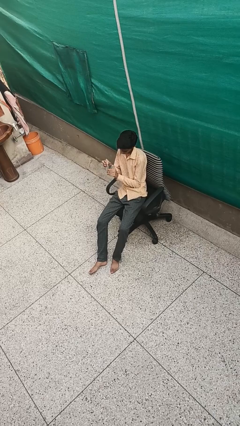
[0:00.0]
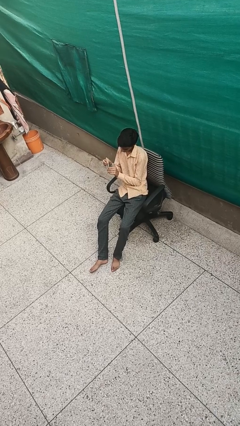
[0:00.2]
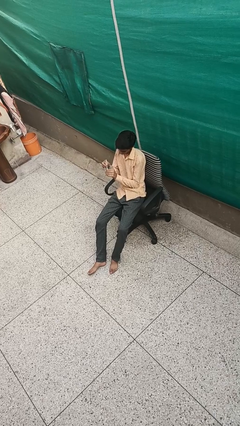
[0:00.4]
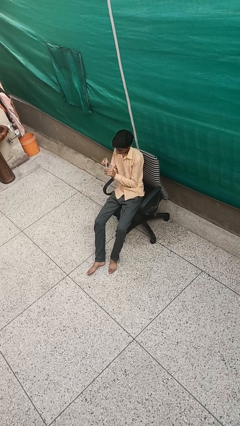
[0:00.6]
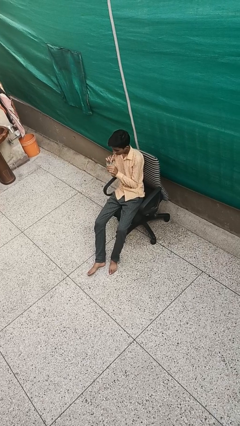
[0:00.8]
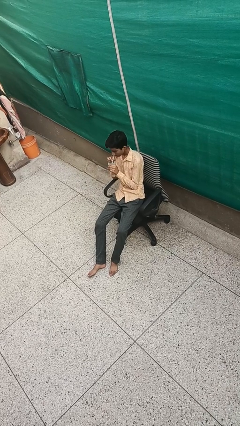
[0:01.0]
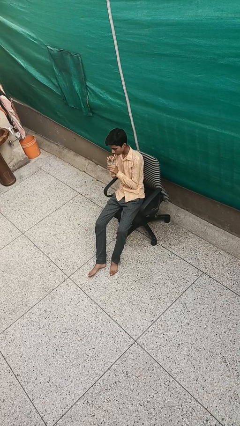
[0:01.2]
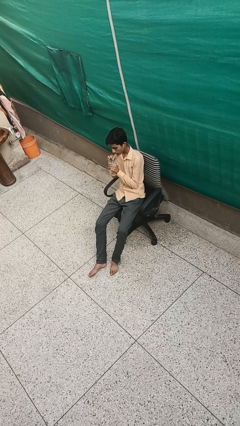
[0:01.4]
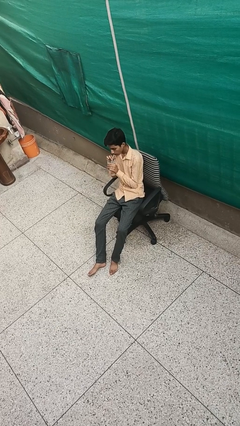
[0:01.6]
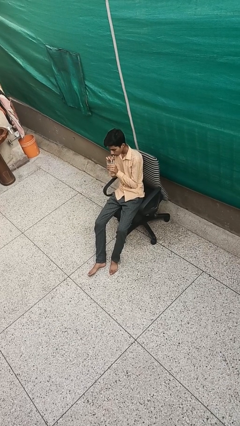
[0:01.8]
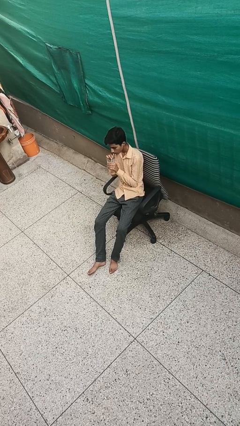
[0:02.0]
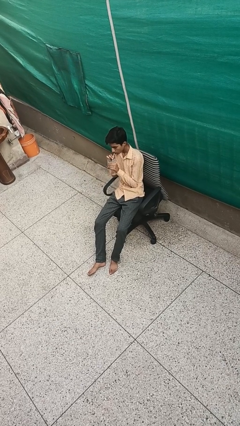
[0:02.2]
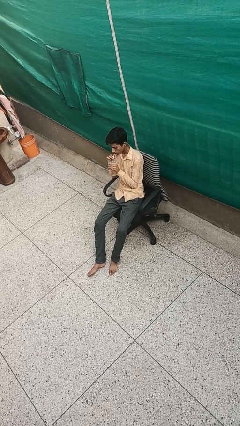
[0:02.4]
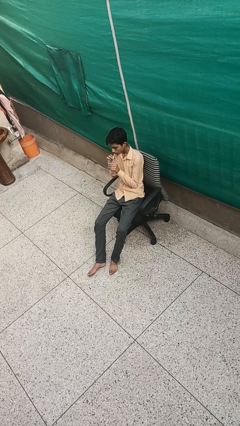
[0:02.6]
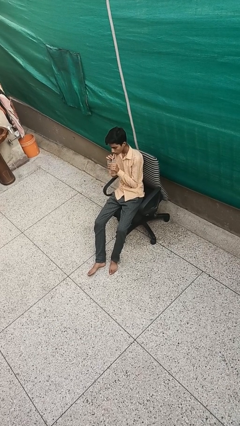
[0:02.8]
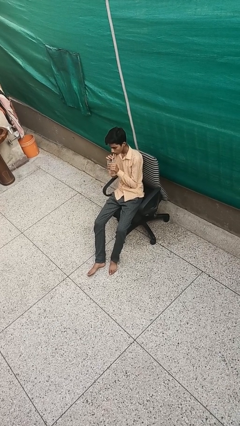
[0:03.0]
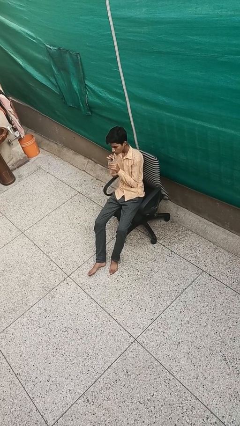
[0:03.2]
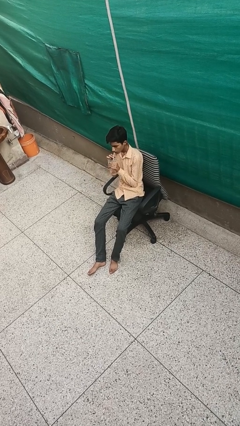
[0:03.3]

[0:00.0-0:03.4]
person drinks from straw

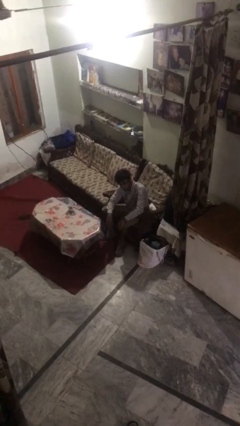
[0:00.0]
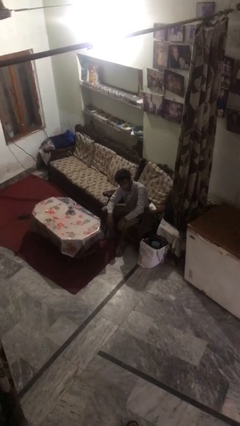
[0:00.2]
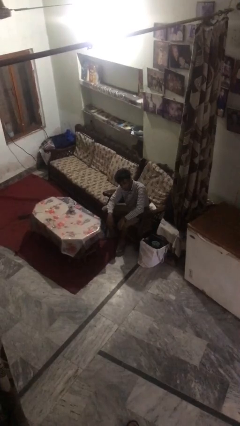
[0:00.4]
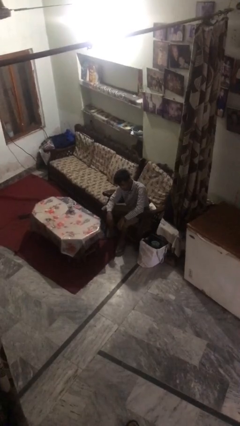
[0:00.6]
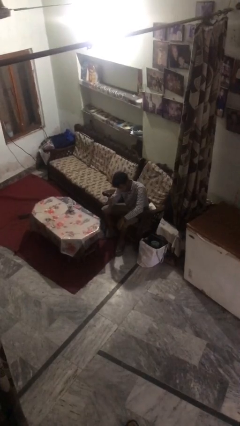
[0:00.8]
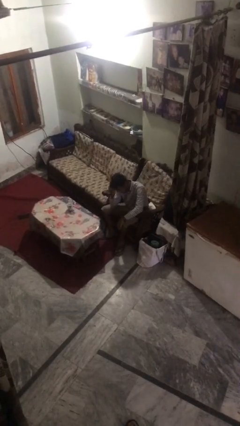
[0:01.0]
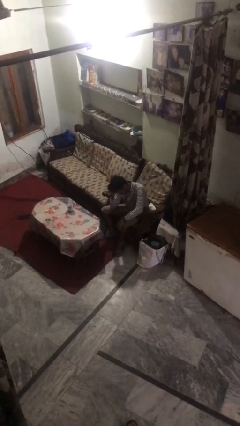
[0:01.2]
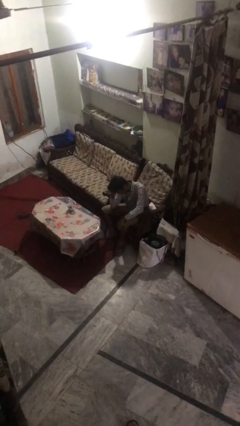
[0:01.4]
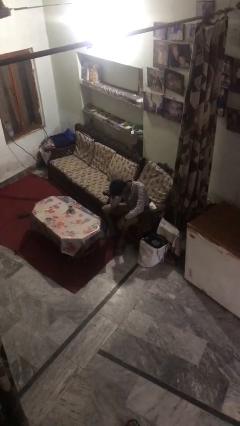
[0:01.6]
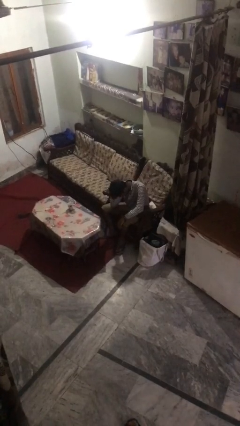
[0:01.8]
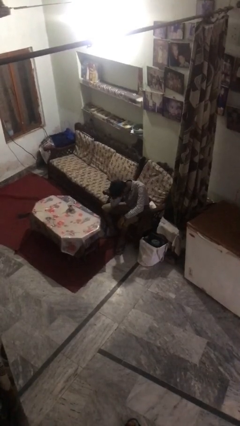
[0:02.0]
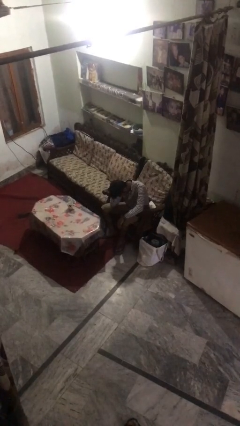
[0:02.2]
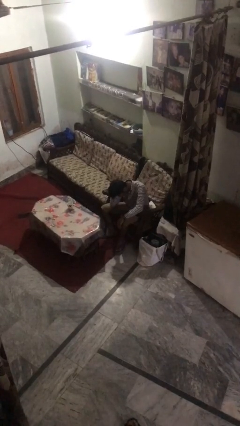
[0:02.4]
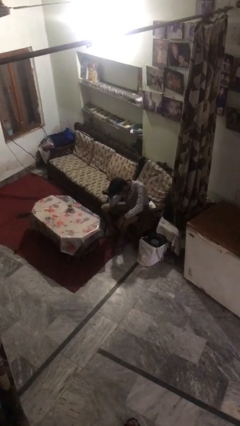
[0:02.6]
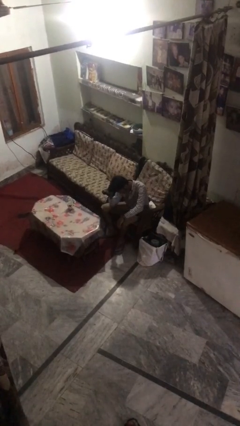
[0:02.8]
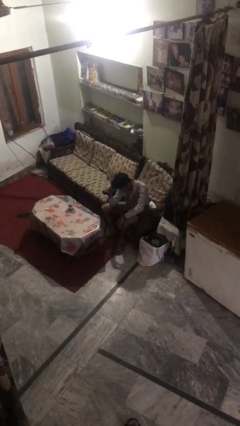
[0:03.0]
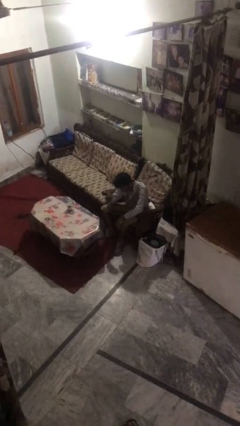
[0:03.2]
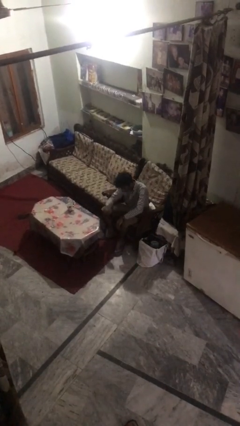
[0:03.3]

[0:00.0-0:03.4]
person strokes hair

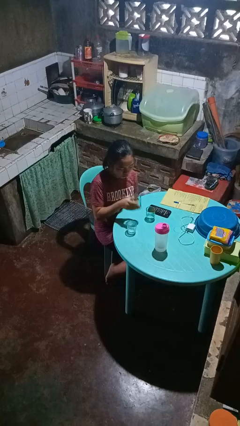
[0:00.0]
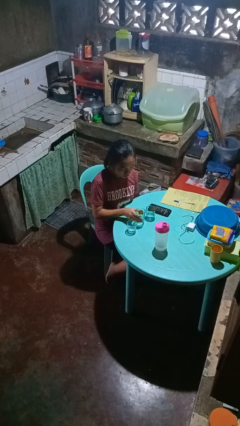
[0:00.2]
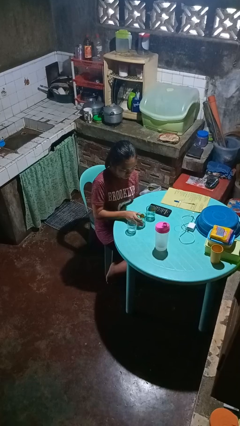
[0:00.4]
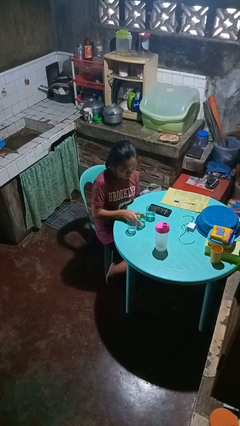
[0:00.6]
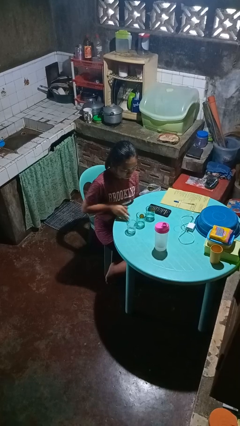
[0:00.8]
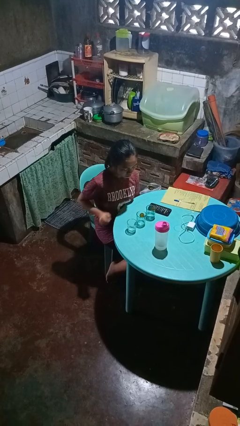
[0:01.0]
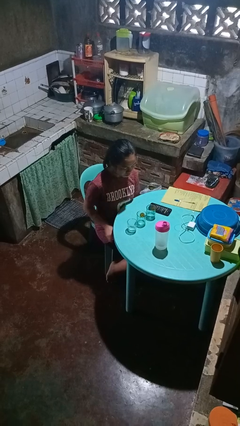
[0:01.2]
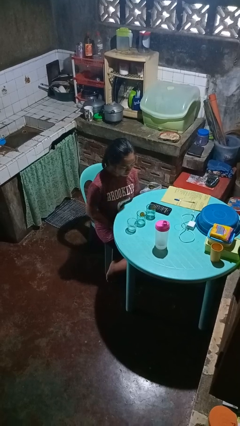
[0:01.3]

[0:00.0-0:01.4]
person puts down object on table

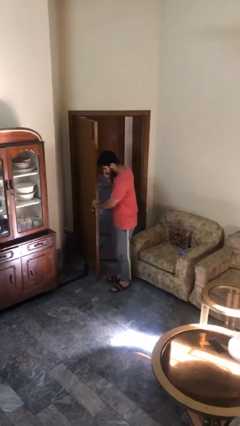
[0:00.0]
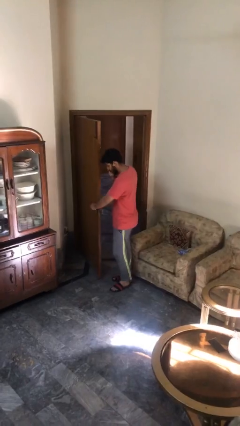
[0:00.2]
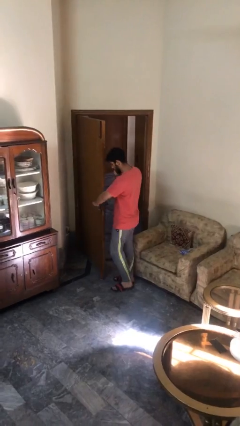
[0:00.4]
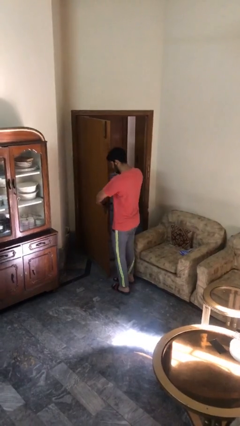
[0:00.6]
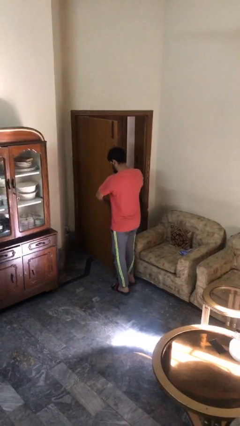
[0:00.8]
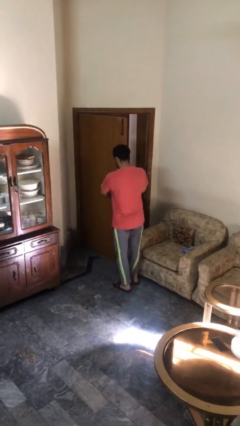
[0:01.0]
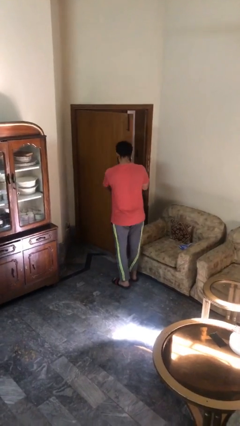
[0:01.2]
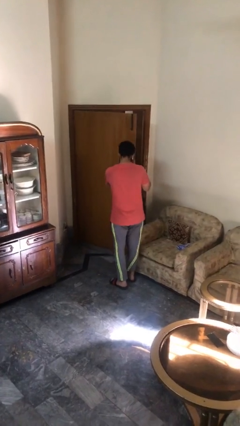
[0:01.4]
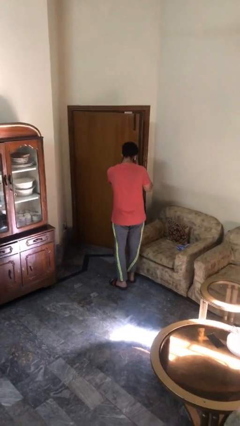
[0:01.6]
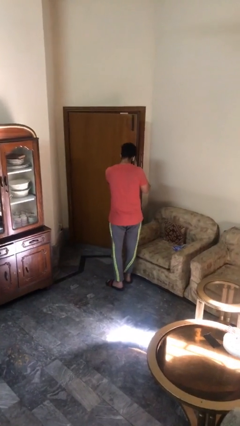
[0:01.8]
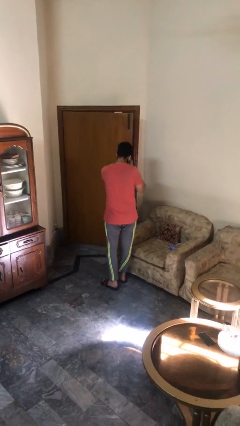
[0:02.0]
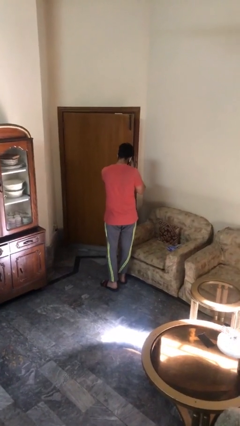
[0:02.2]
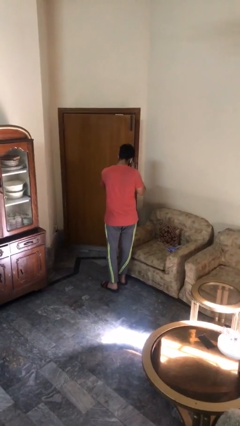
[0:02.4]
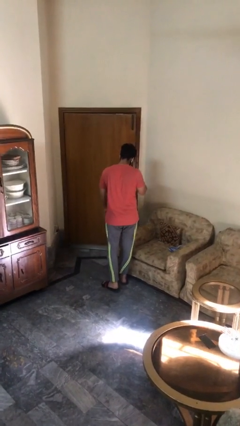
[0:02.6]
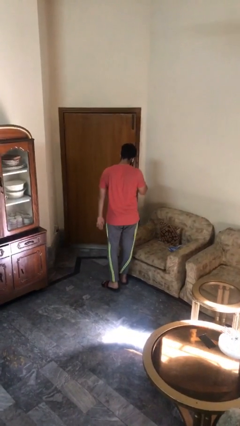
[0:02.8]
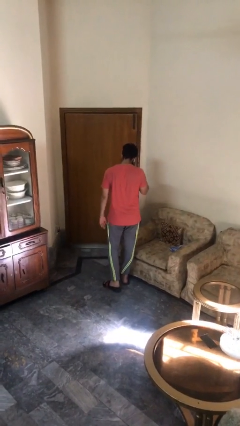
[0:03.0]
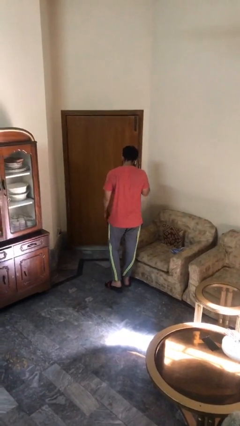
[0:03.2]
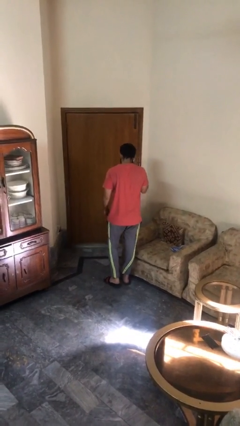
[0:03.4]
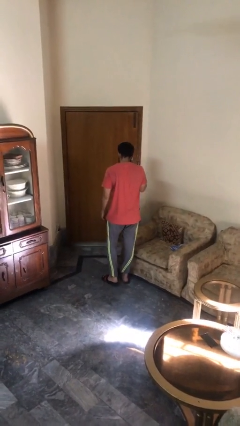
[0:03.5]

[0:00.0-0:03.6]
person closes facility door

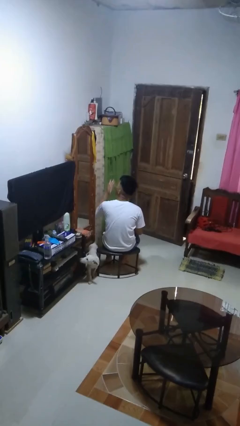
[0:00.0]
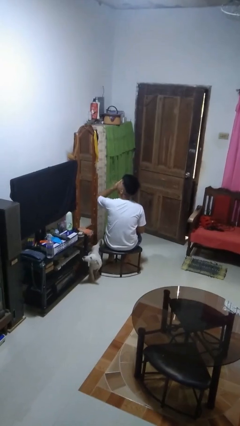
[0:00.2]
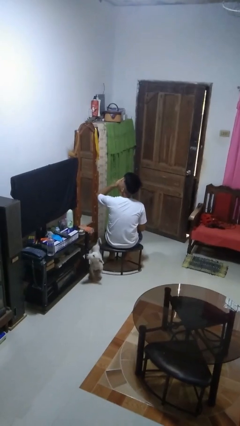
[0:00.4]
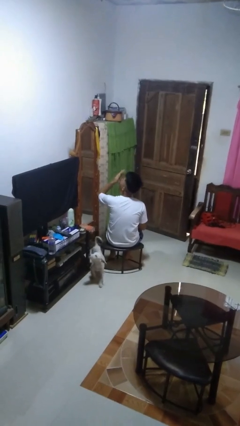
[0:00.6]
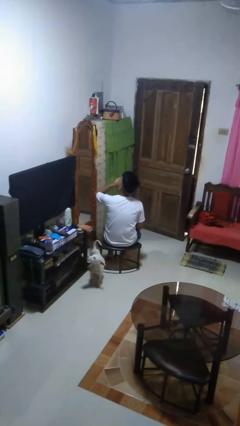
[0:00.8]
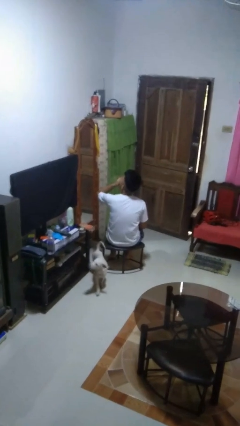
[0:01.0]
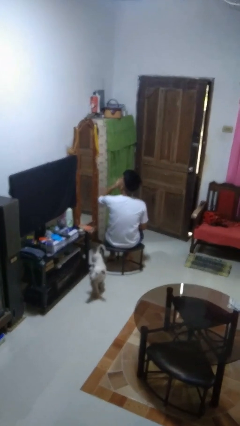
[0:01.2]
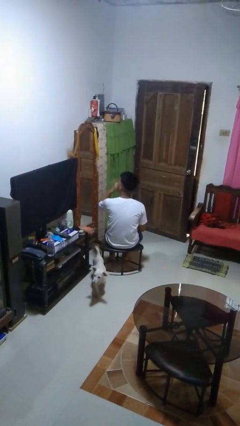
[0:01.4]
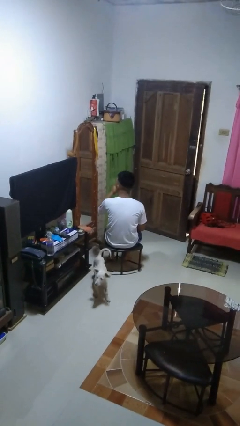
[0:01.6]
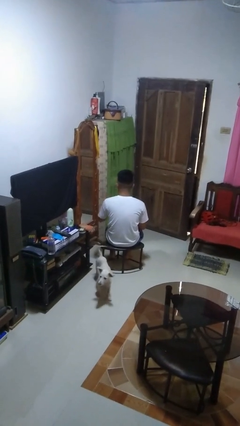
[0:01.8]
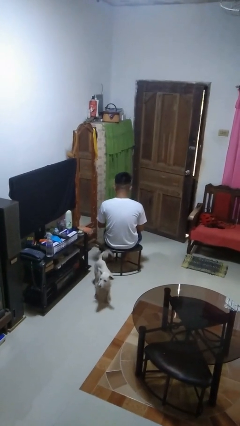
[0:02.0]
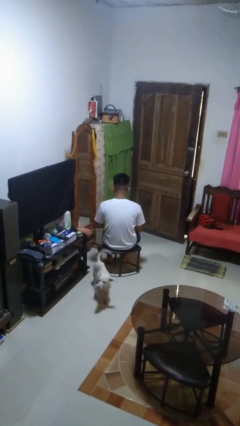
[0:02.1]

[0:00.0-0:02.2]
person yawns

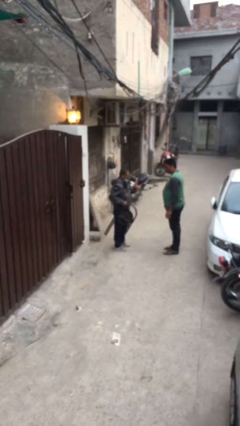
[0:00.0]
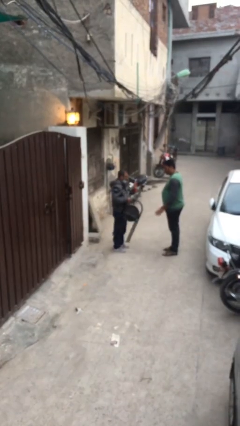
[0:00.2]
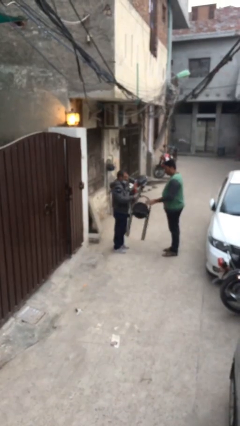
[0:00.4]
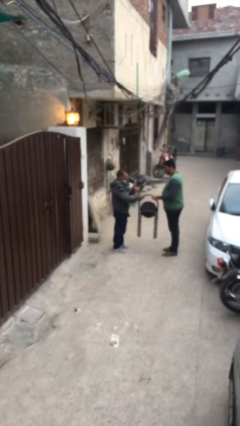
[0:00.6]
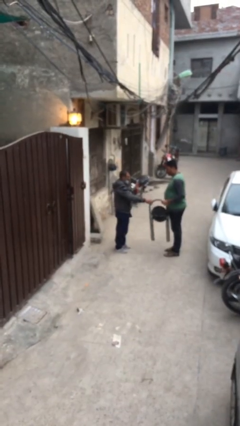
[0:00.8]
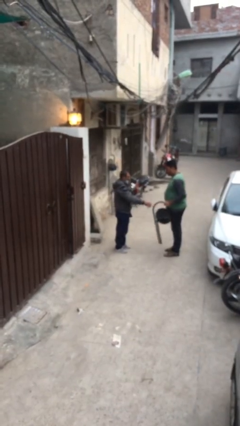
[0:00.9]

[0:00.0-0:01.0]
person transfers object to person

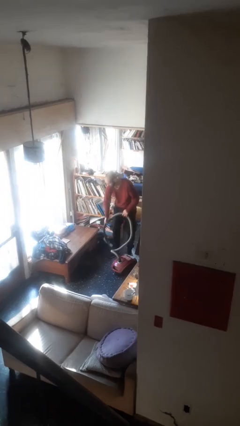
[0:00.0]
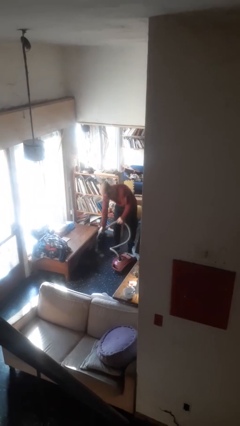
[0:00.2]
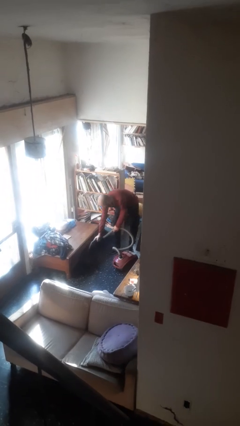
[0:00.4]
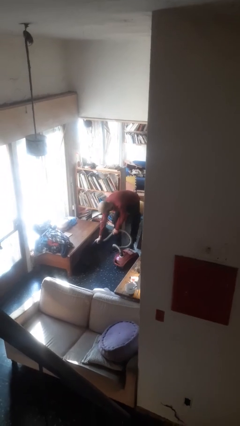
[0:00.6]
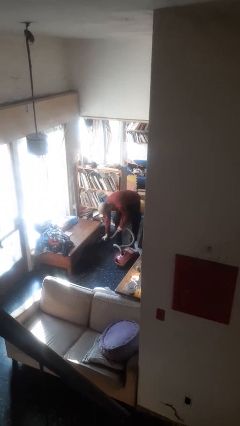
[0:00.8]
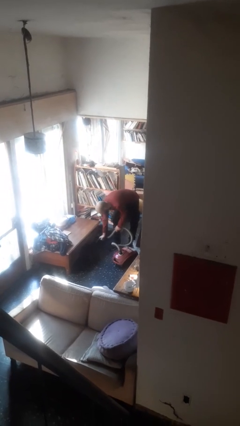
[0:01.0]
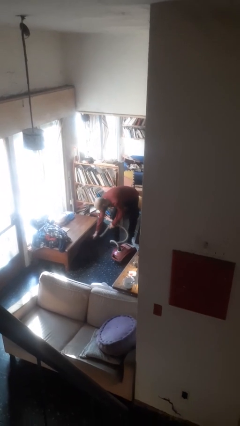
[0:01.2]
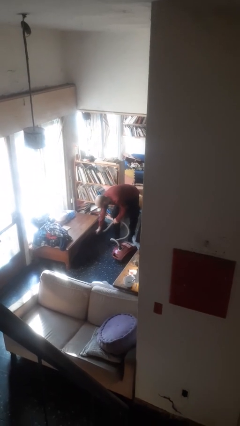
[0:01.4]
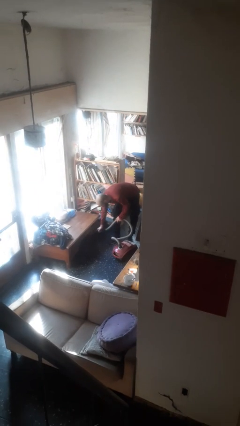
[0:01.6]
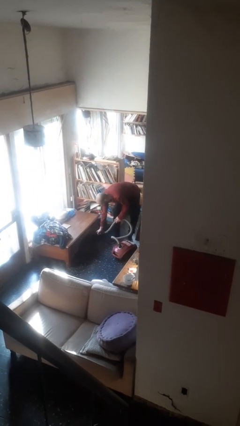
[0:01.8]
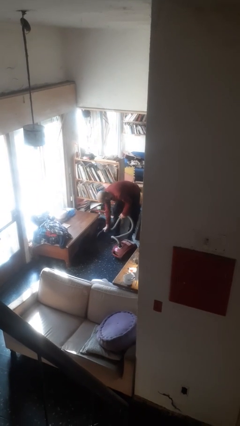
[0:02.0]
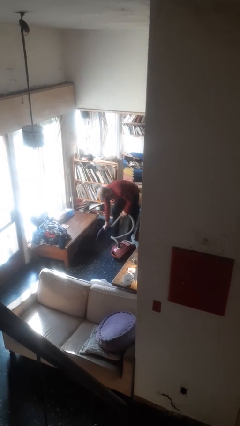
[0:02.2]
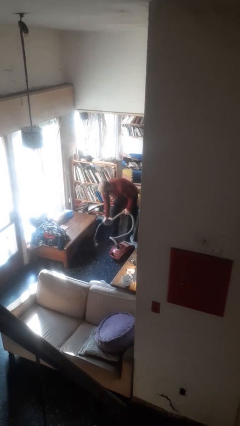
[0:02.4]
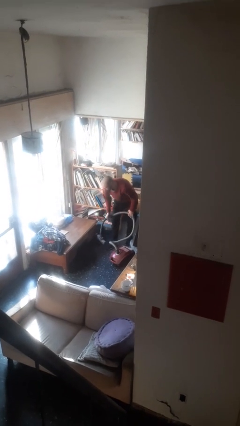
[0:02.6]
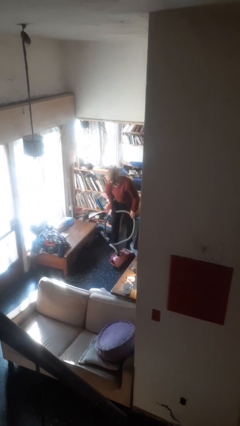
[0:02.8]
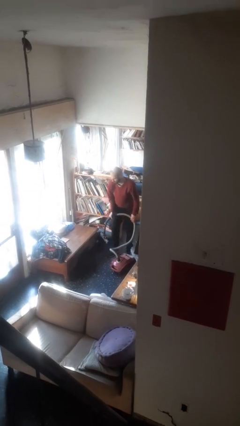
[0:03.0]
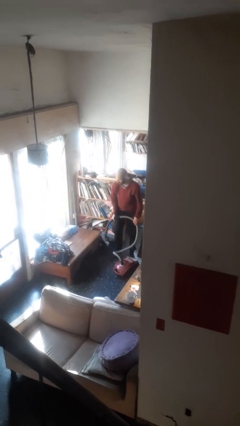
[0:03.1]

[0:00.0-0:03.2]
person vacuums carpet
